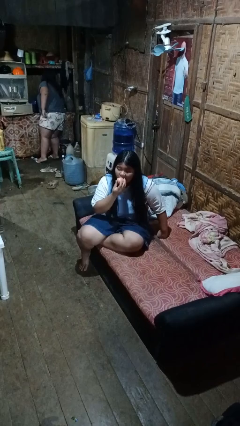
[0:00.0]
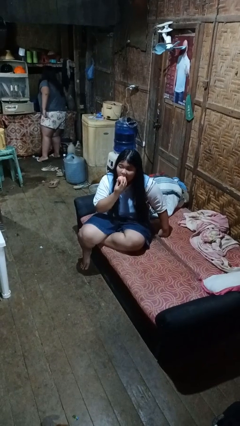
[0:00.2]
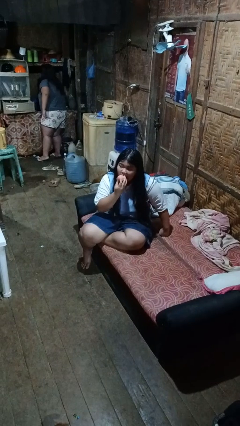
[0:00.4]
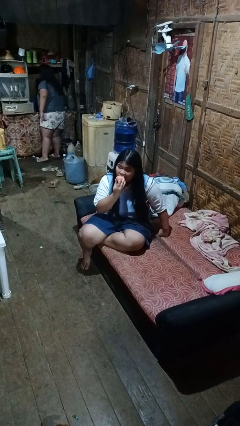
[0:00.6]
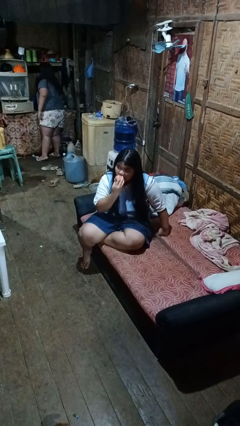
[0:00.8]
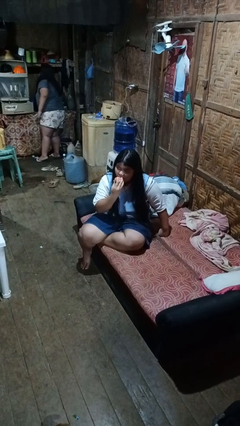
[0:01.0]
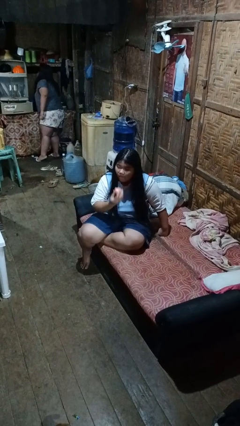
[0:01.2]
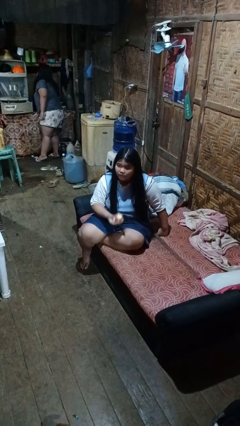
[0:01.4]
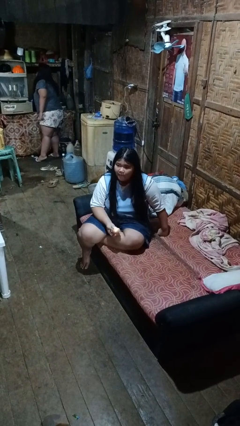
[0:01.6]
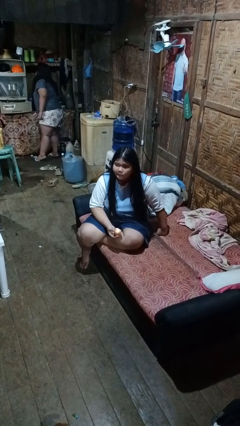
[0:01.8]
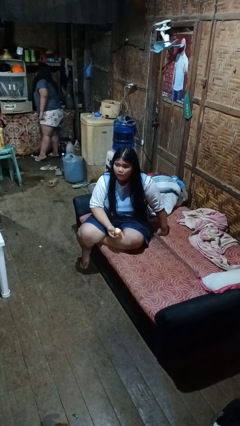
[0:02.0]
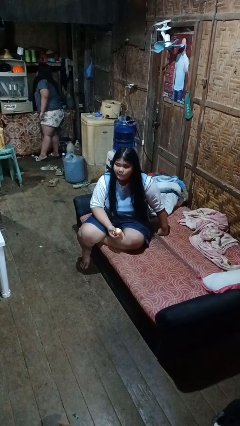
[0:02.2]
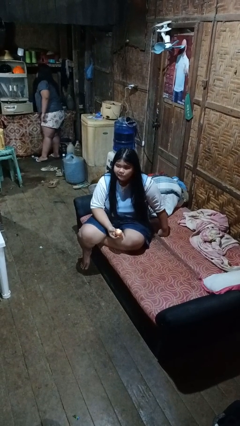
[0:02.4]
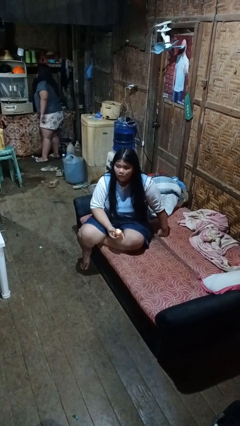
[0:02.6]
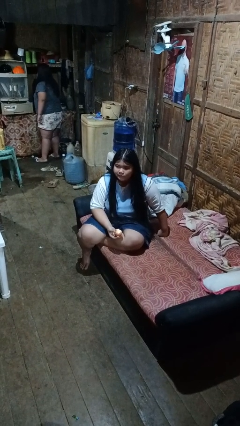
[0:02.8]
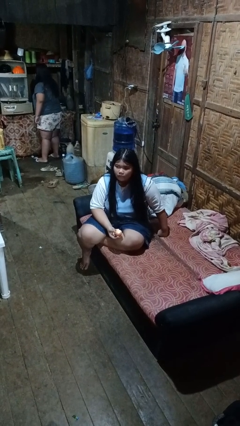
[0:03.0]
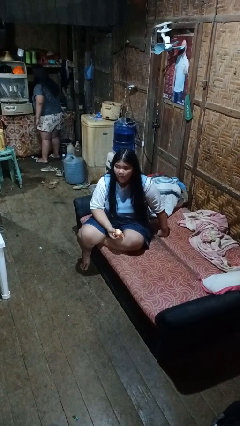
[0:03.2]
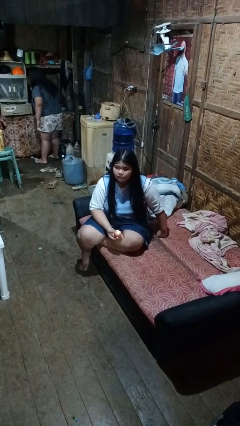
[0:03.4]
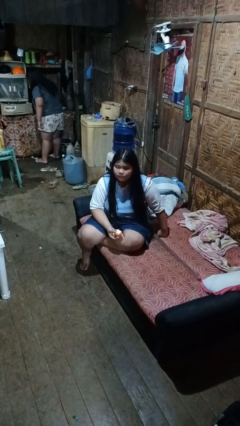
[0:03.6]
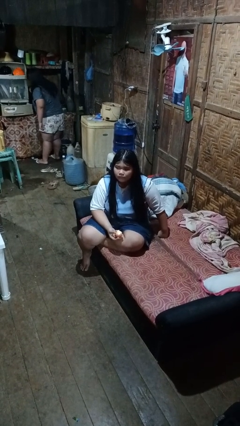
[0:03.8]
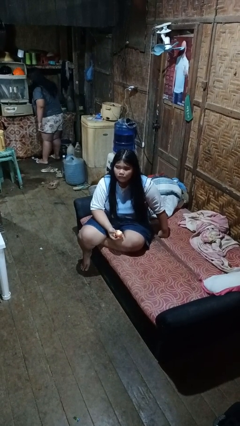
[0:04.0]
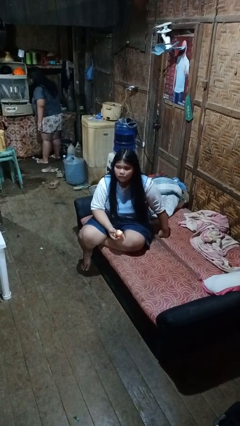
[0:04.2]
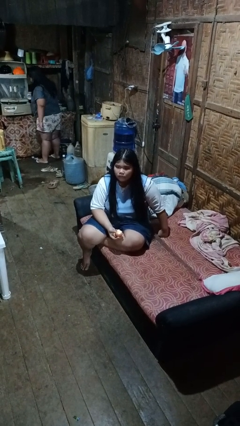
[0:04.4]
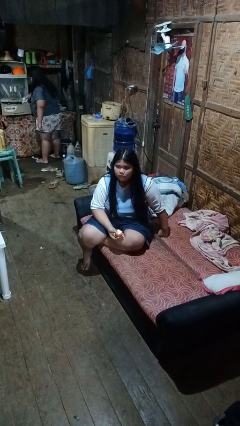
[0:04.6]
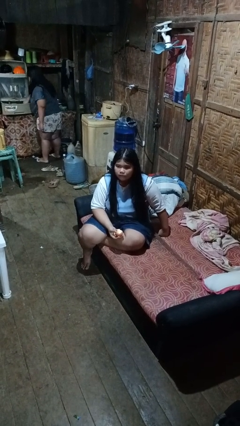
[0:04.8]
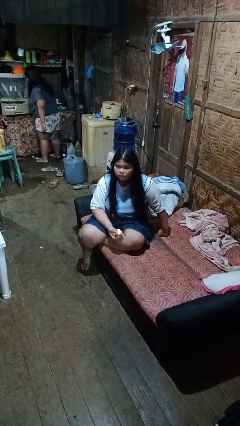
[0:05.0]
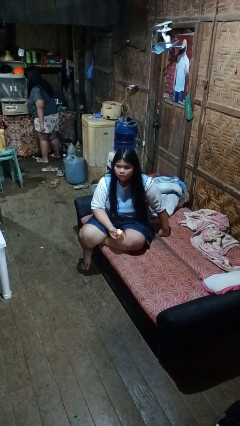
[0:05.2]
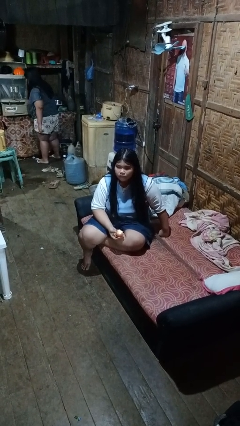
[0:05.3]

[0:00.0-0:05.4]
person eats apple

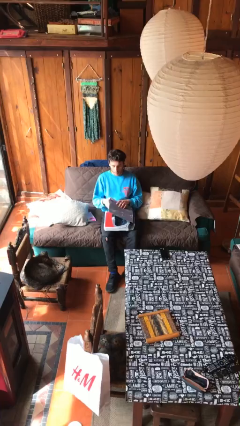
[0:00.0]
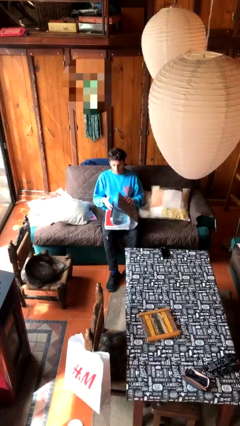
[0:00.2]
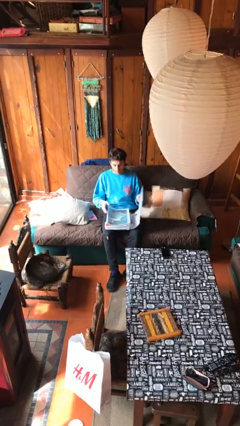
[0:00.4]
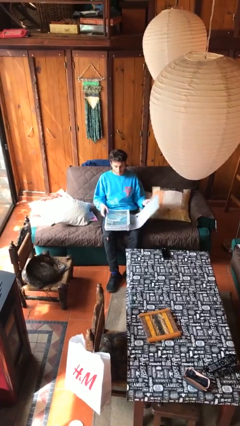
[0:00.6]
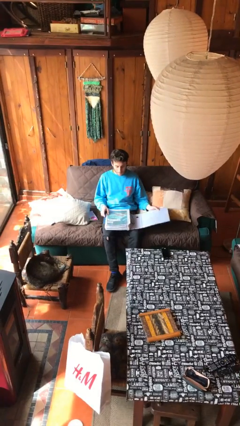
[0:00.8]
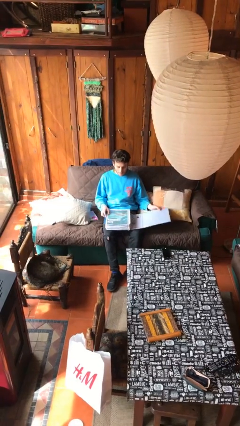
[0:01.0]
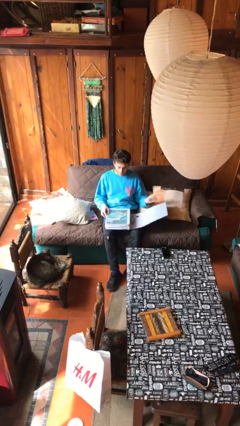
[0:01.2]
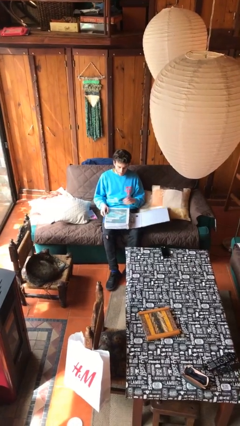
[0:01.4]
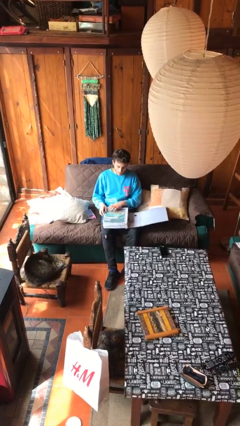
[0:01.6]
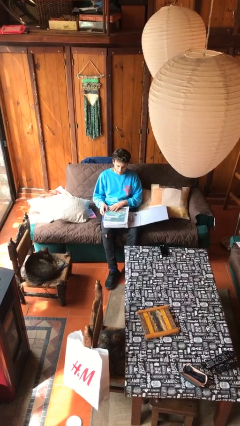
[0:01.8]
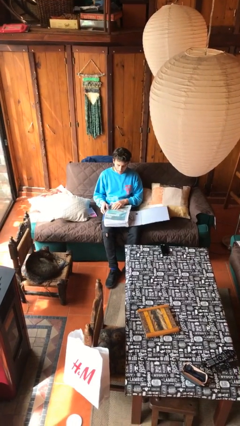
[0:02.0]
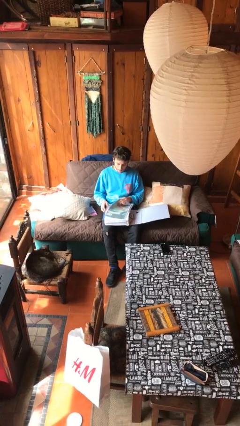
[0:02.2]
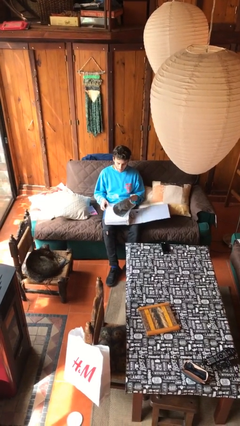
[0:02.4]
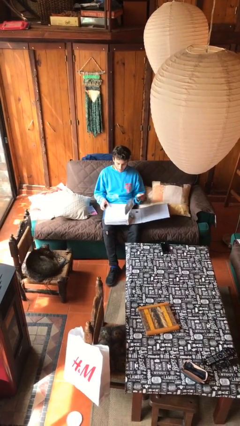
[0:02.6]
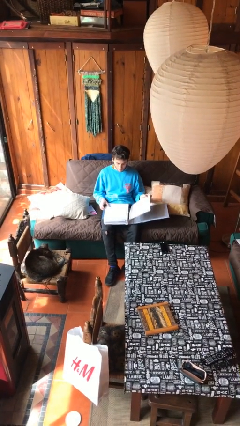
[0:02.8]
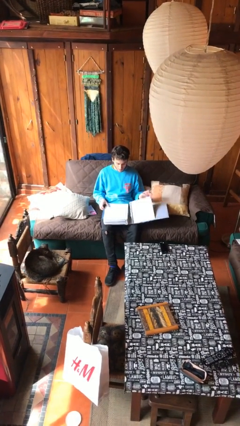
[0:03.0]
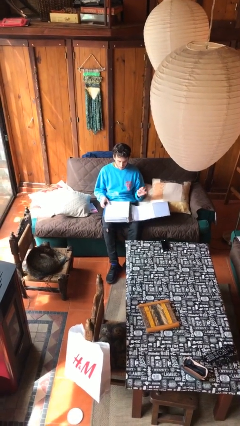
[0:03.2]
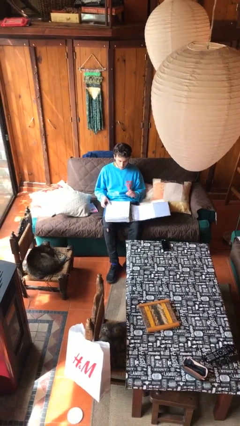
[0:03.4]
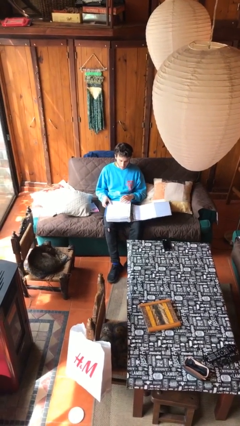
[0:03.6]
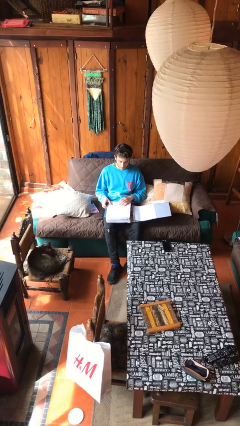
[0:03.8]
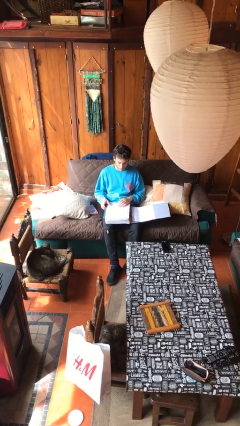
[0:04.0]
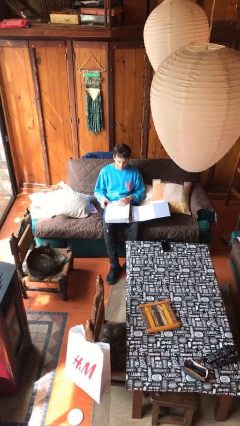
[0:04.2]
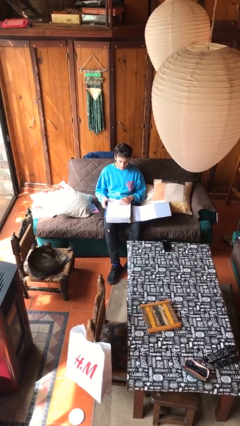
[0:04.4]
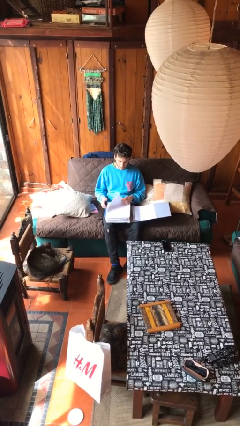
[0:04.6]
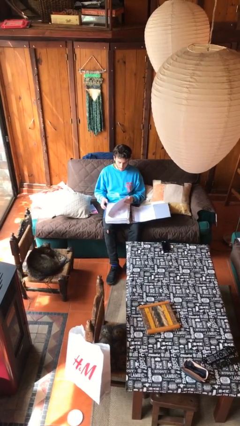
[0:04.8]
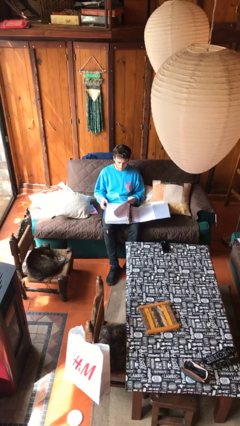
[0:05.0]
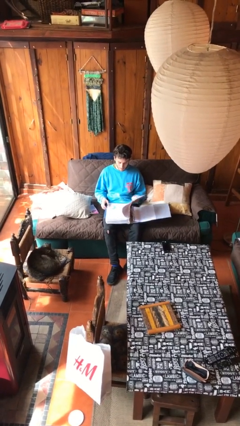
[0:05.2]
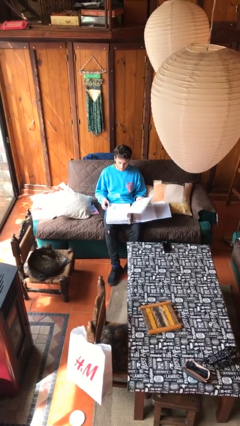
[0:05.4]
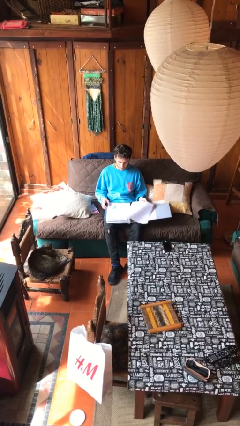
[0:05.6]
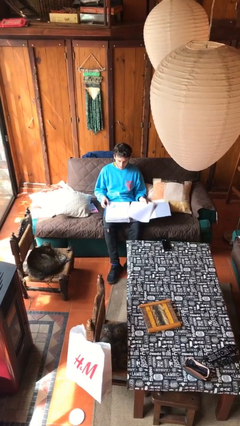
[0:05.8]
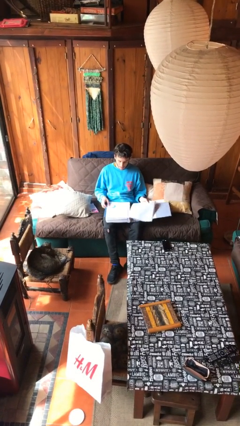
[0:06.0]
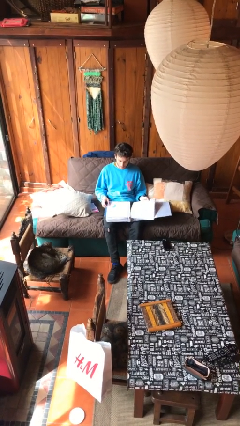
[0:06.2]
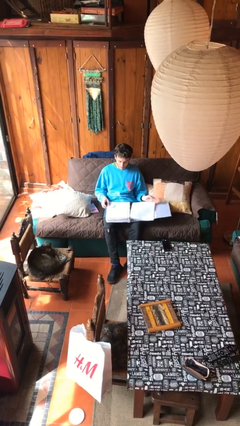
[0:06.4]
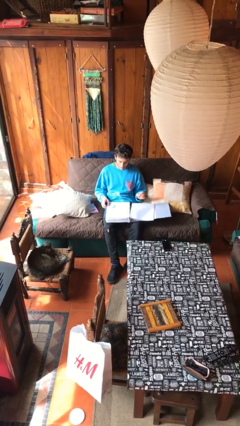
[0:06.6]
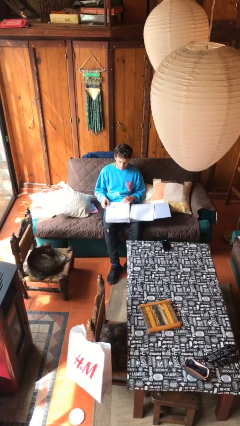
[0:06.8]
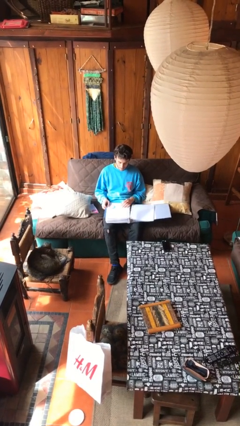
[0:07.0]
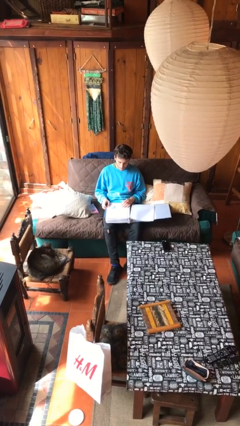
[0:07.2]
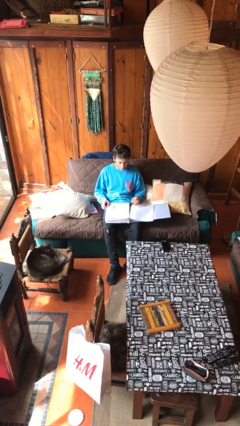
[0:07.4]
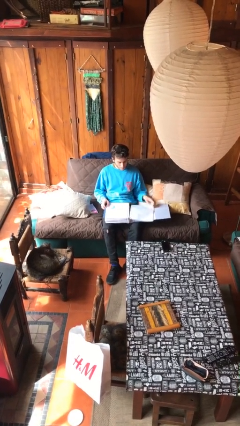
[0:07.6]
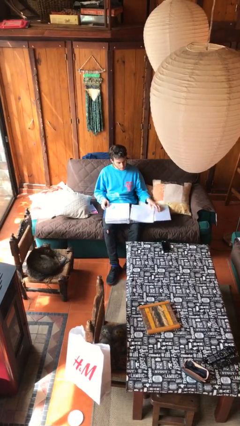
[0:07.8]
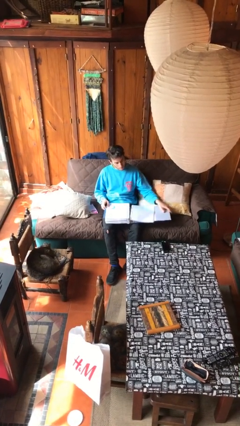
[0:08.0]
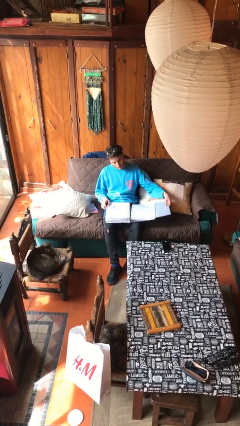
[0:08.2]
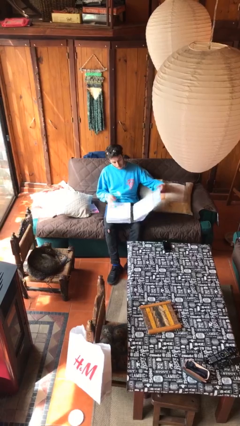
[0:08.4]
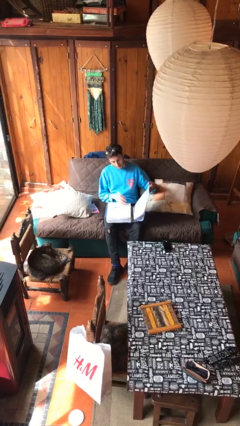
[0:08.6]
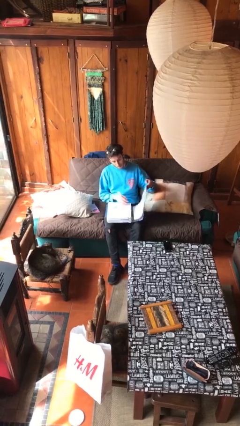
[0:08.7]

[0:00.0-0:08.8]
person reads document

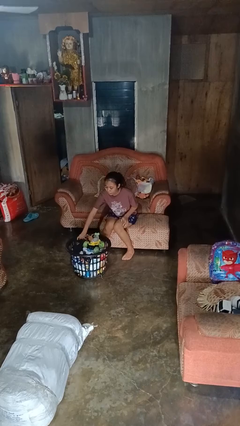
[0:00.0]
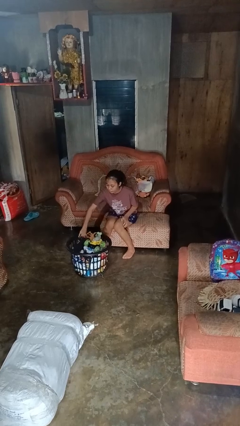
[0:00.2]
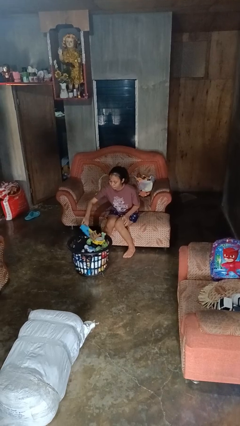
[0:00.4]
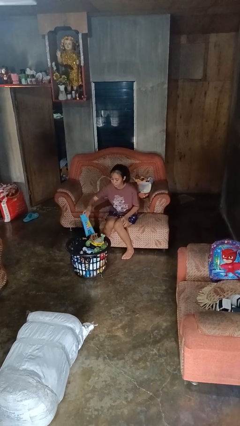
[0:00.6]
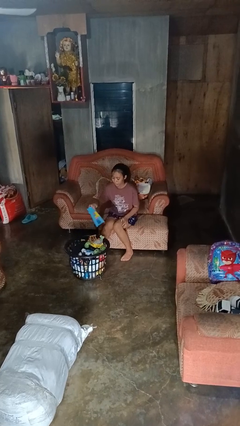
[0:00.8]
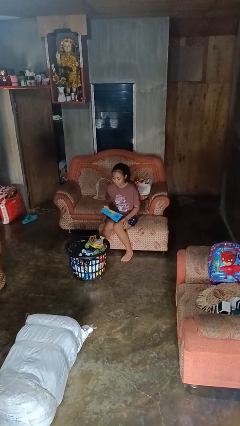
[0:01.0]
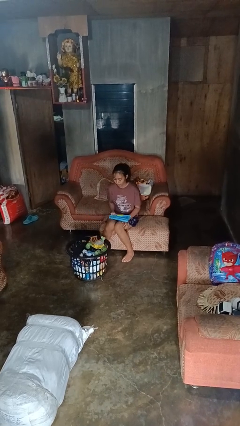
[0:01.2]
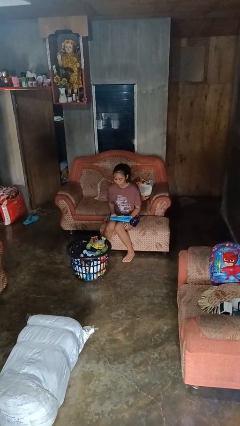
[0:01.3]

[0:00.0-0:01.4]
person takes object from basket

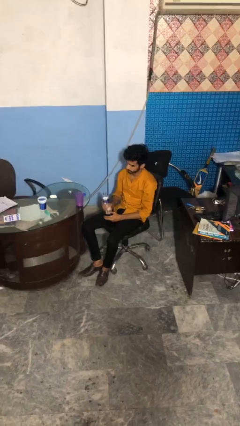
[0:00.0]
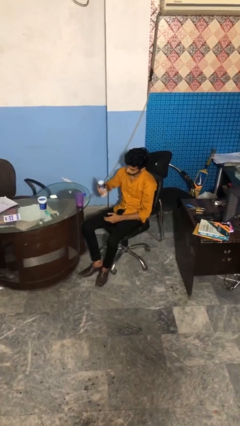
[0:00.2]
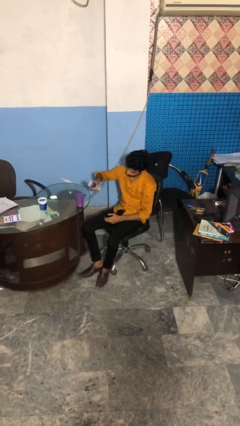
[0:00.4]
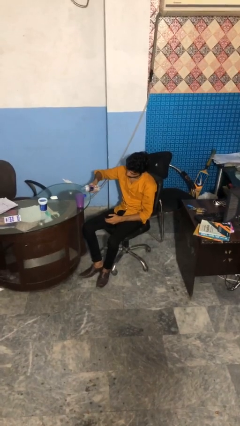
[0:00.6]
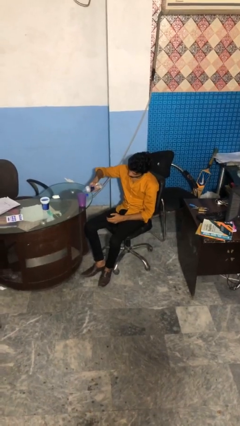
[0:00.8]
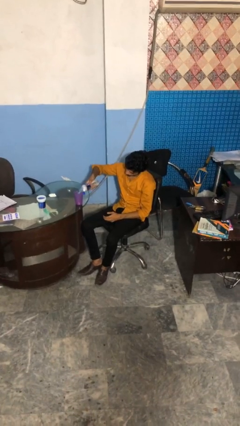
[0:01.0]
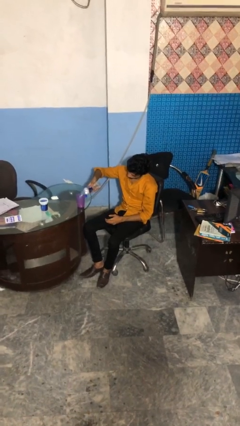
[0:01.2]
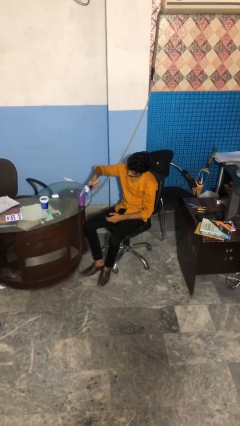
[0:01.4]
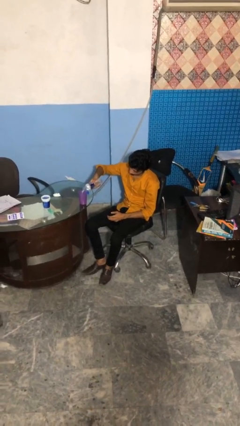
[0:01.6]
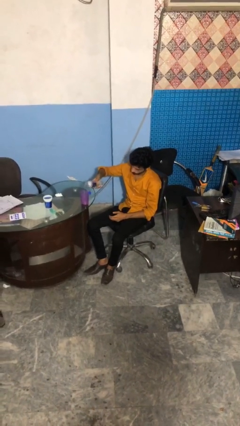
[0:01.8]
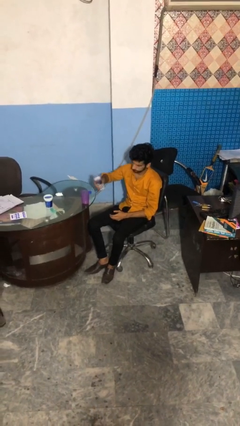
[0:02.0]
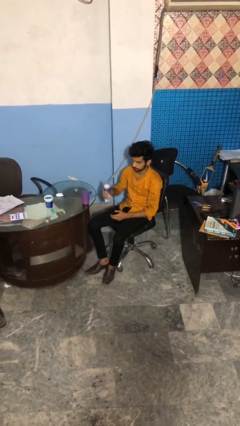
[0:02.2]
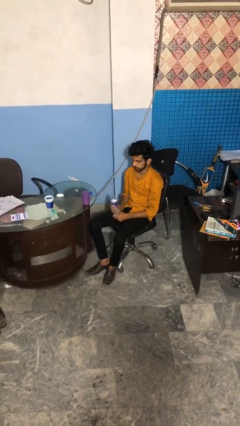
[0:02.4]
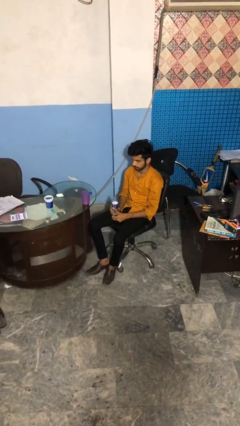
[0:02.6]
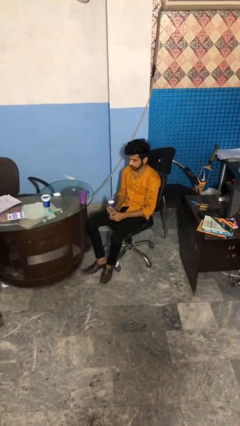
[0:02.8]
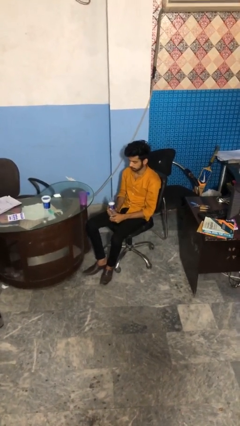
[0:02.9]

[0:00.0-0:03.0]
person pours liquid into cup
